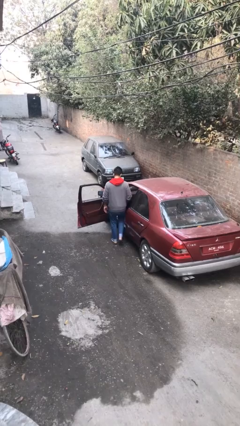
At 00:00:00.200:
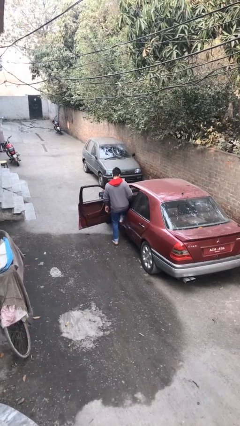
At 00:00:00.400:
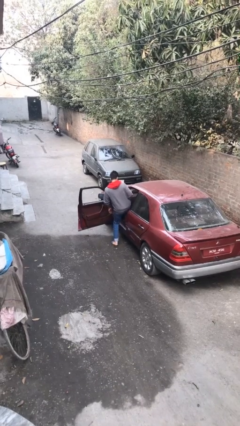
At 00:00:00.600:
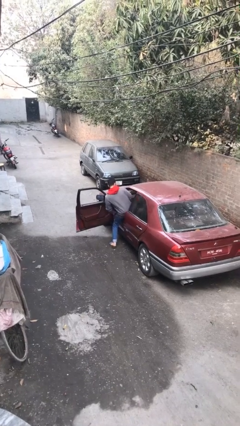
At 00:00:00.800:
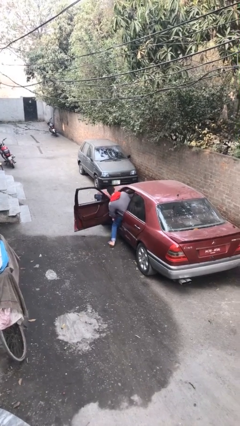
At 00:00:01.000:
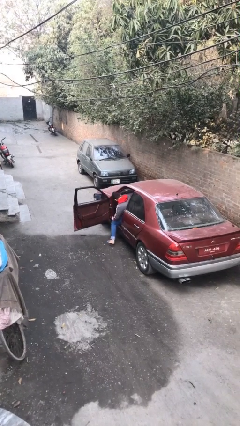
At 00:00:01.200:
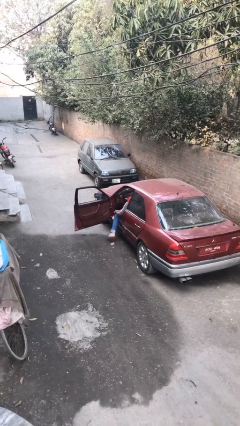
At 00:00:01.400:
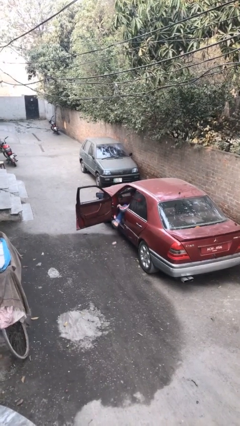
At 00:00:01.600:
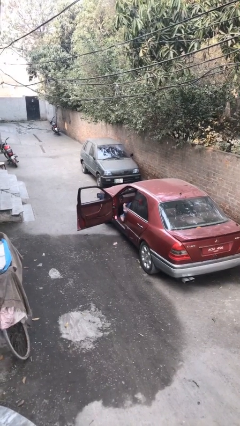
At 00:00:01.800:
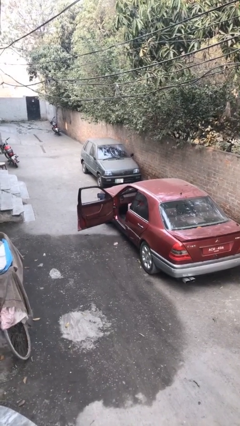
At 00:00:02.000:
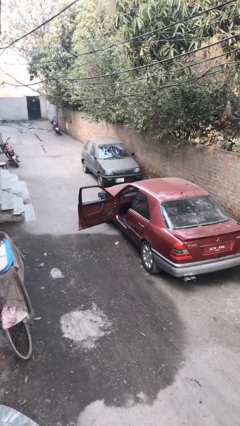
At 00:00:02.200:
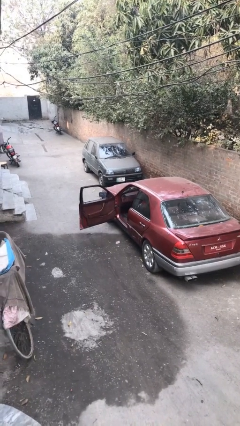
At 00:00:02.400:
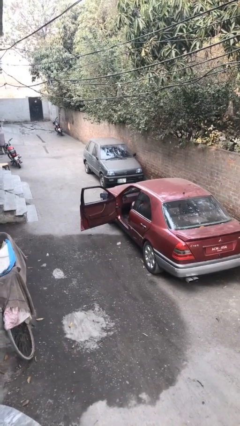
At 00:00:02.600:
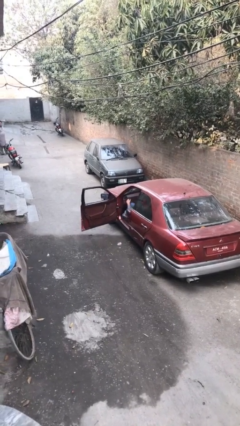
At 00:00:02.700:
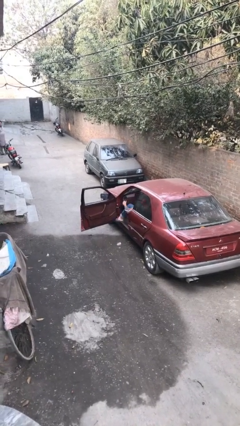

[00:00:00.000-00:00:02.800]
person enters car

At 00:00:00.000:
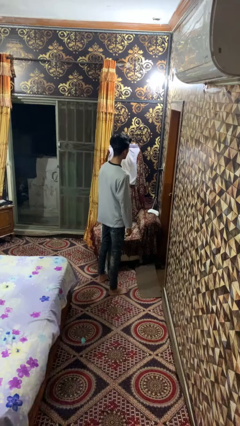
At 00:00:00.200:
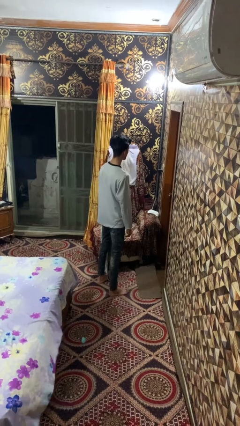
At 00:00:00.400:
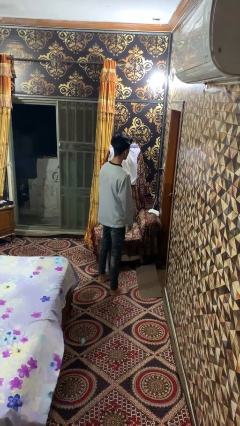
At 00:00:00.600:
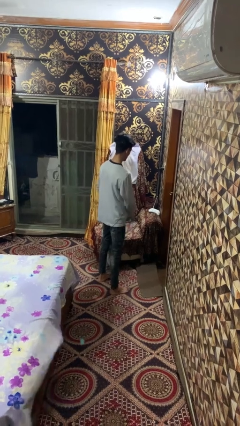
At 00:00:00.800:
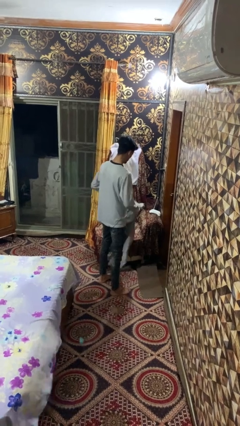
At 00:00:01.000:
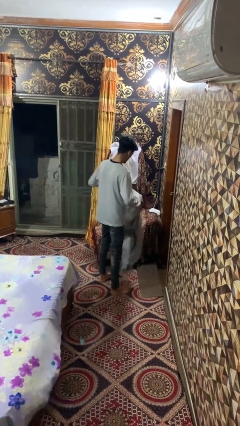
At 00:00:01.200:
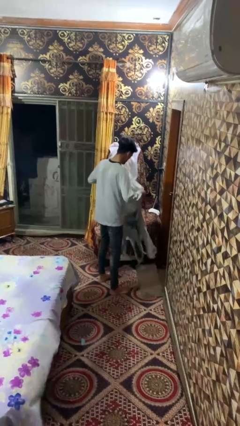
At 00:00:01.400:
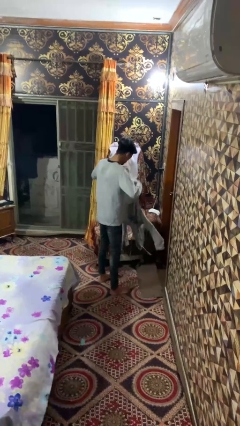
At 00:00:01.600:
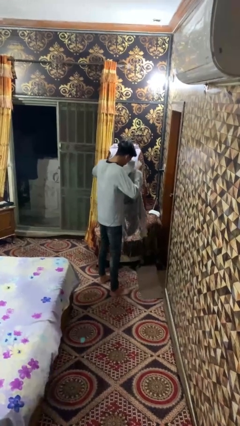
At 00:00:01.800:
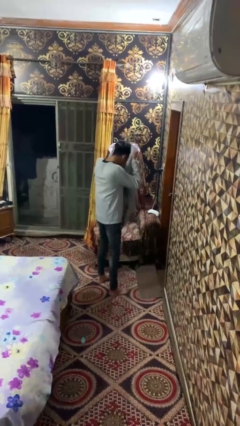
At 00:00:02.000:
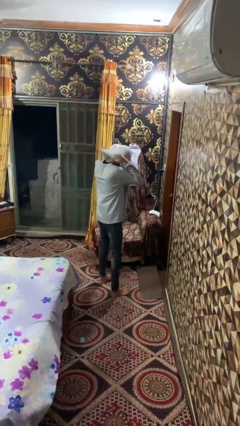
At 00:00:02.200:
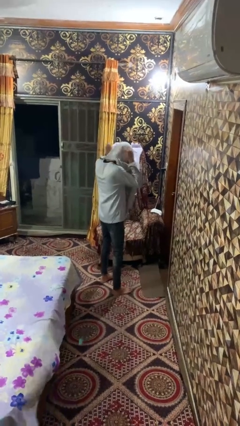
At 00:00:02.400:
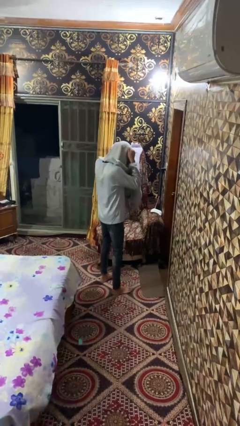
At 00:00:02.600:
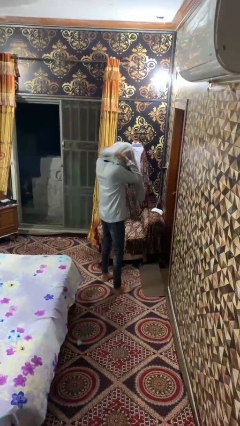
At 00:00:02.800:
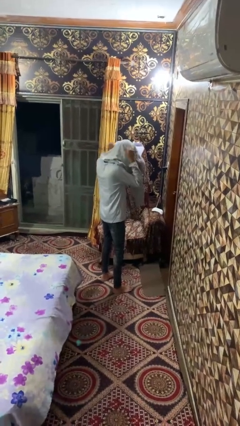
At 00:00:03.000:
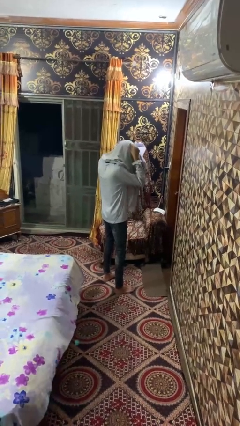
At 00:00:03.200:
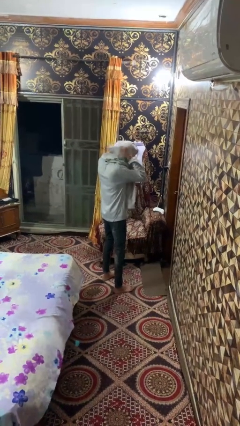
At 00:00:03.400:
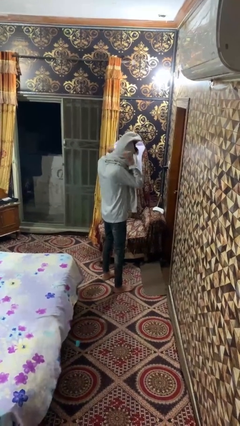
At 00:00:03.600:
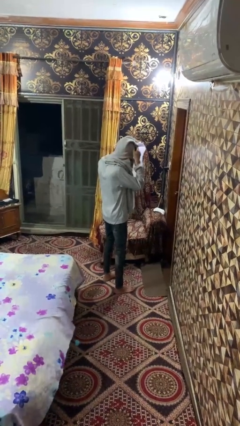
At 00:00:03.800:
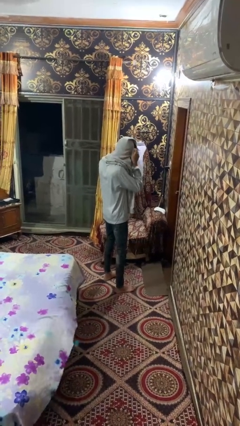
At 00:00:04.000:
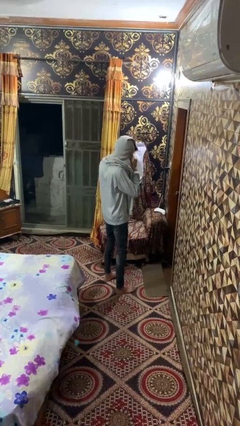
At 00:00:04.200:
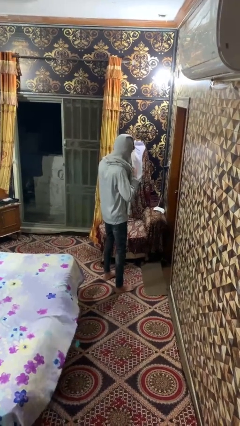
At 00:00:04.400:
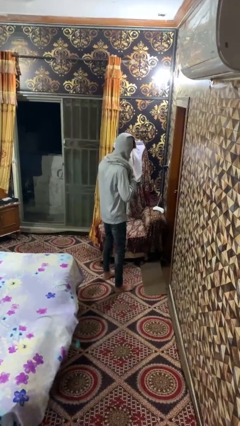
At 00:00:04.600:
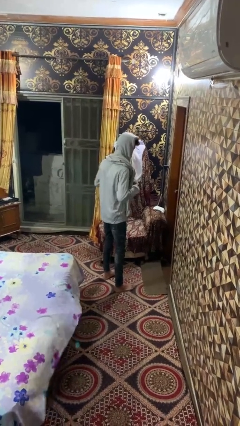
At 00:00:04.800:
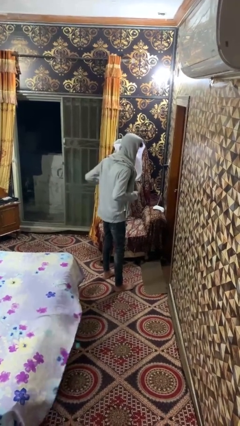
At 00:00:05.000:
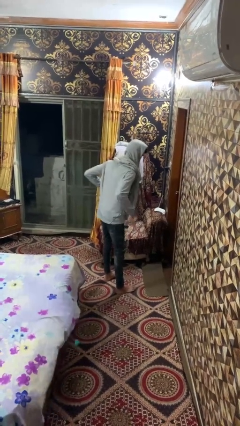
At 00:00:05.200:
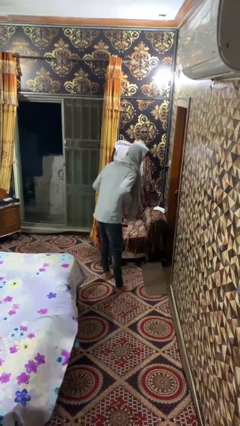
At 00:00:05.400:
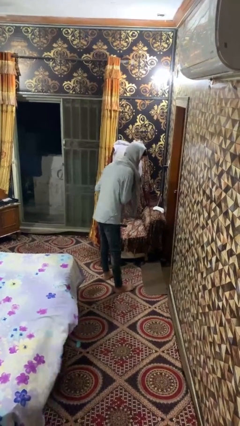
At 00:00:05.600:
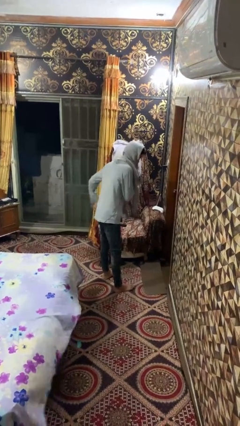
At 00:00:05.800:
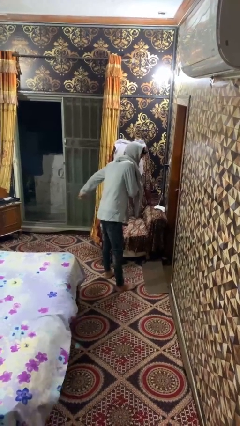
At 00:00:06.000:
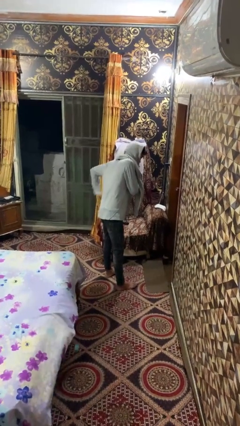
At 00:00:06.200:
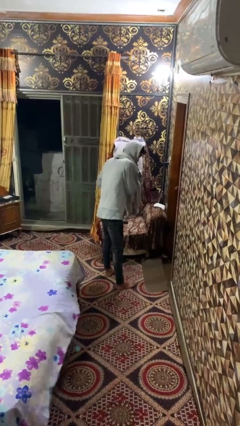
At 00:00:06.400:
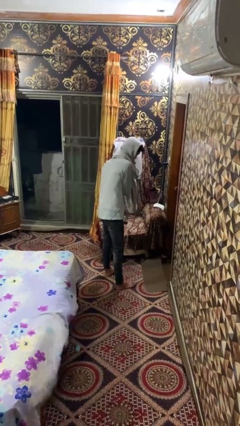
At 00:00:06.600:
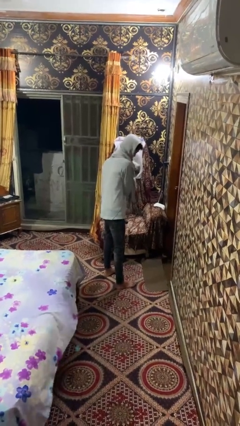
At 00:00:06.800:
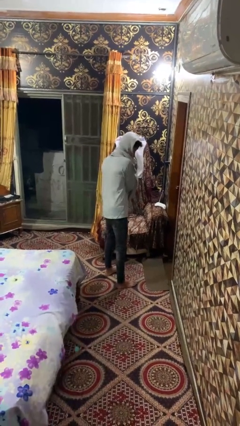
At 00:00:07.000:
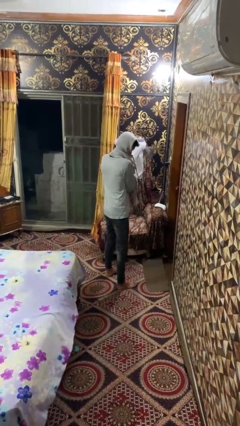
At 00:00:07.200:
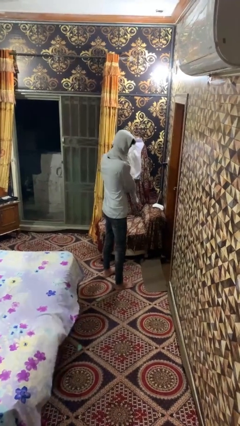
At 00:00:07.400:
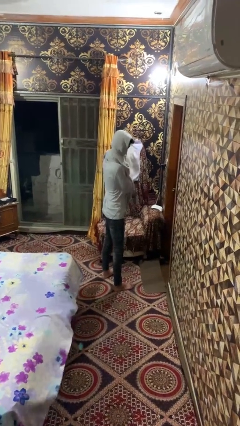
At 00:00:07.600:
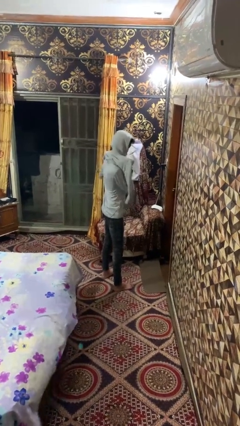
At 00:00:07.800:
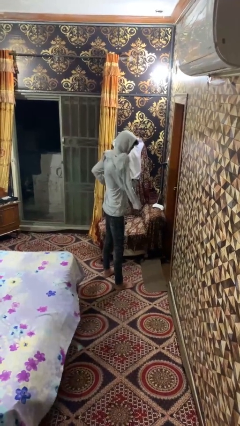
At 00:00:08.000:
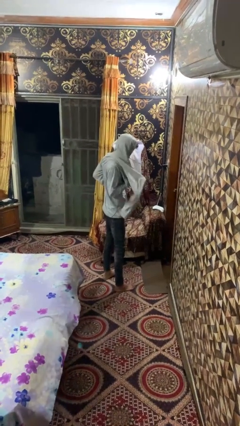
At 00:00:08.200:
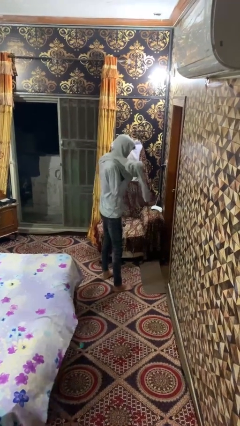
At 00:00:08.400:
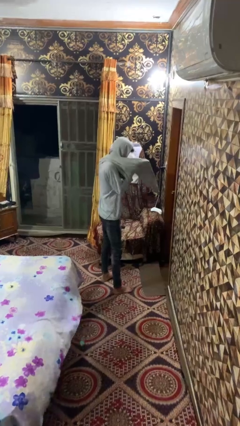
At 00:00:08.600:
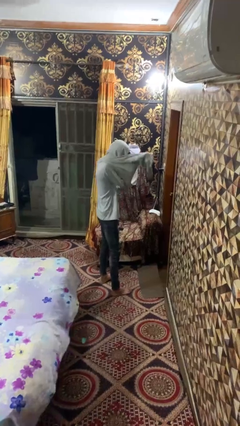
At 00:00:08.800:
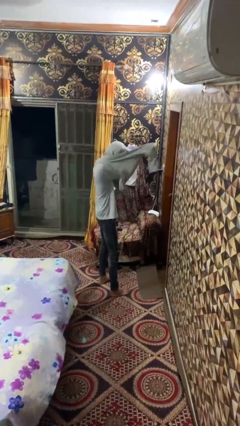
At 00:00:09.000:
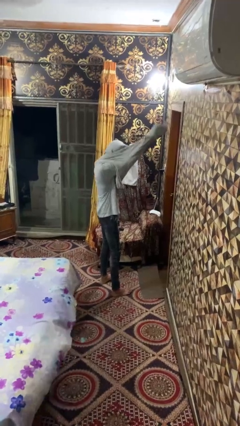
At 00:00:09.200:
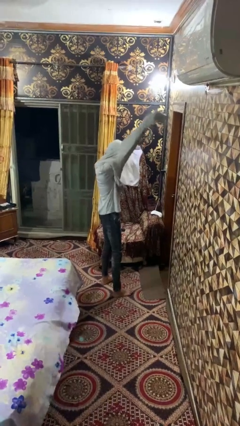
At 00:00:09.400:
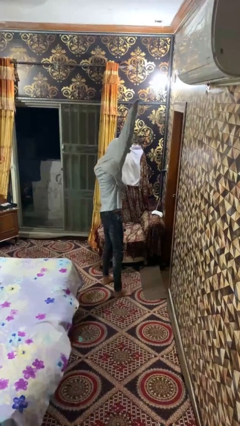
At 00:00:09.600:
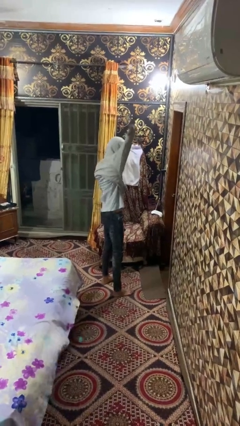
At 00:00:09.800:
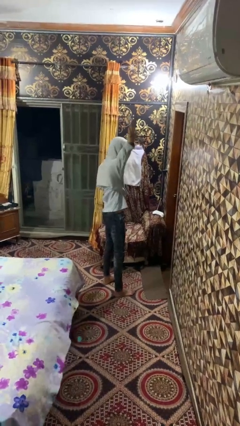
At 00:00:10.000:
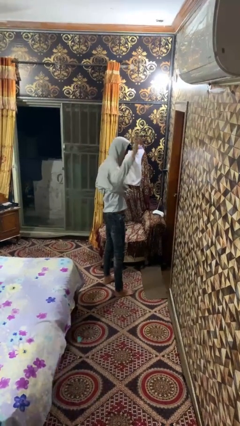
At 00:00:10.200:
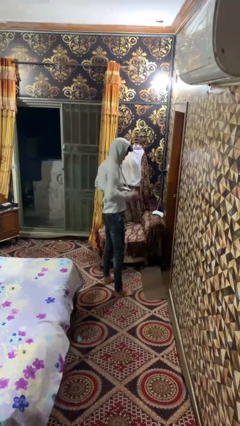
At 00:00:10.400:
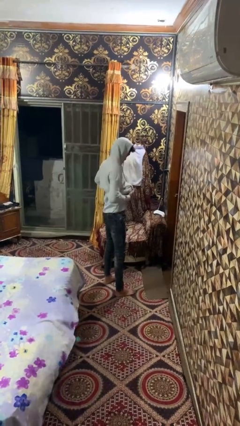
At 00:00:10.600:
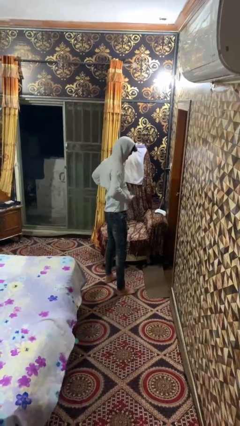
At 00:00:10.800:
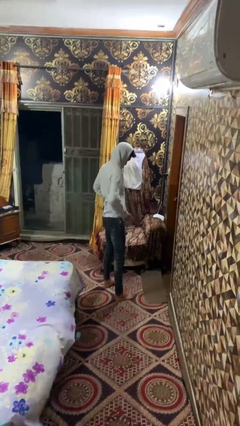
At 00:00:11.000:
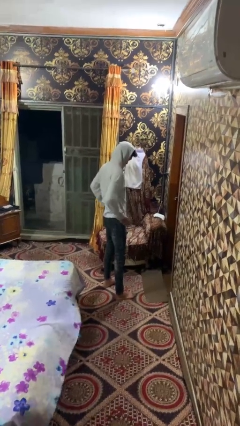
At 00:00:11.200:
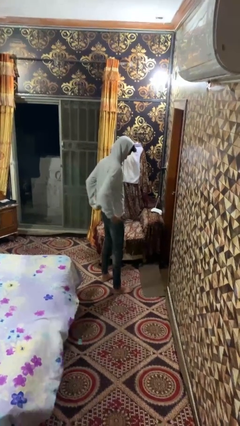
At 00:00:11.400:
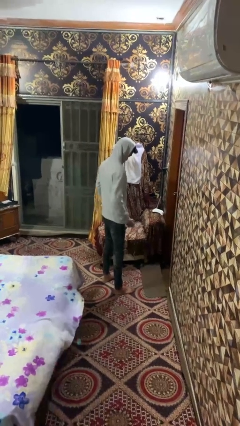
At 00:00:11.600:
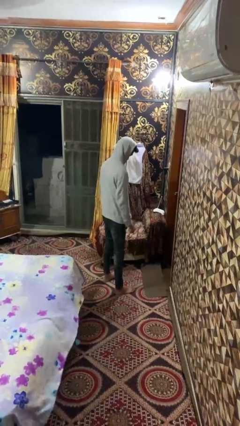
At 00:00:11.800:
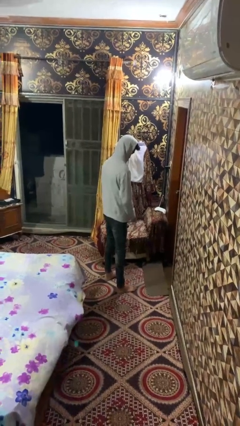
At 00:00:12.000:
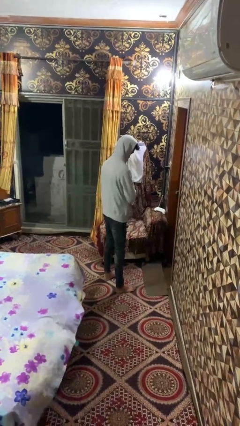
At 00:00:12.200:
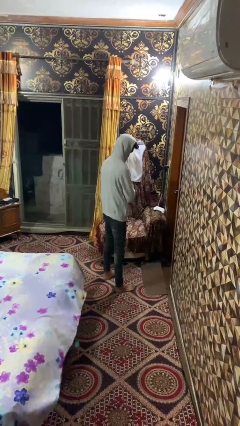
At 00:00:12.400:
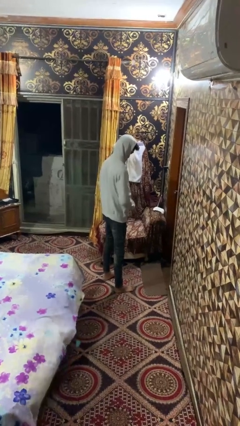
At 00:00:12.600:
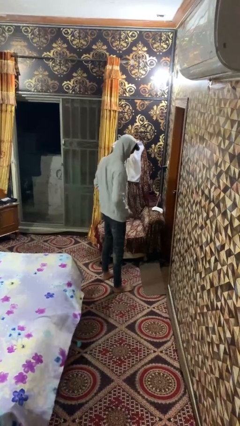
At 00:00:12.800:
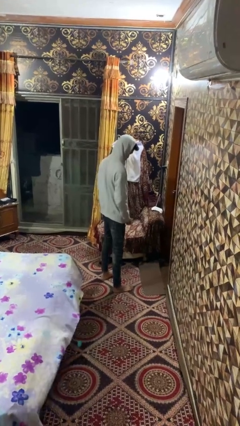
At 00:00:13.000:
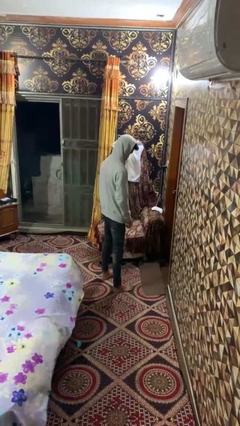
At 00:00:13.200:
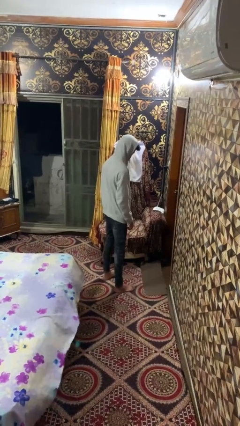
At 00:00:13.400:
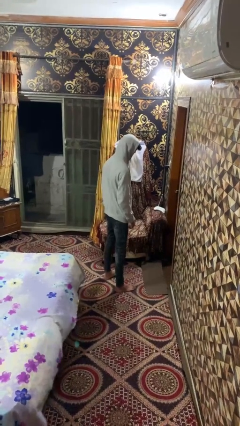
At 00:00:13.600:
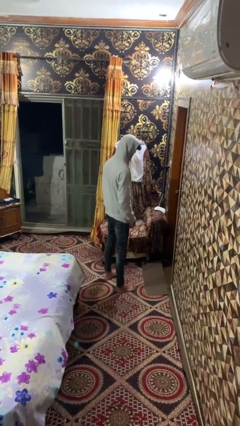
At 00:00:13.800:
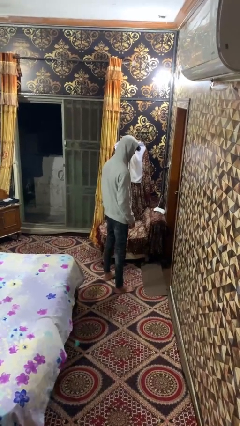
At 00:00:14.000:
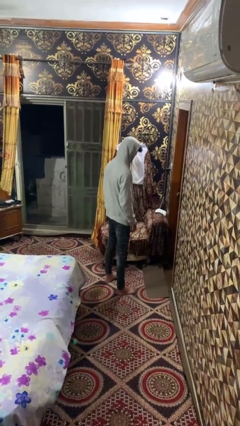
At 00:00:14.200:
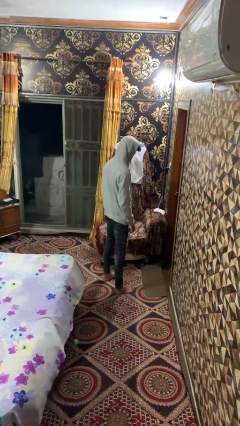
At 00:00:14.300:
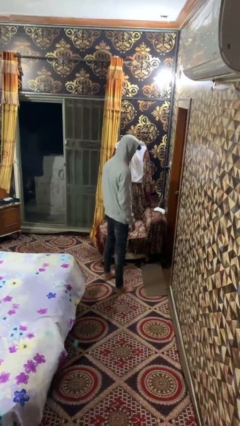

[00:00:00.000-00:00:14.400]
person puts on hoodie

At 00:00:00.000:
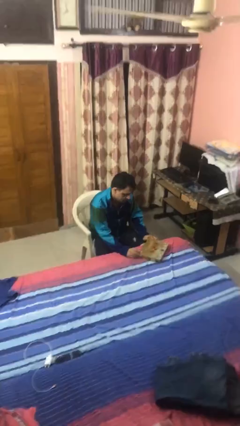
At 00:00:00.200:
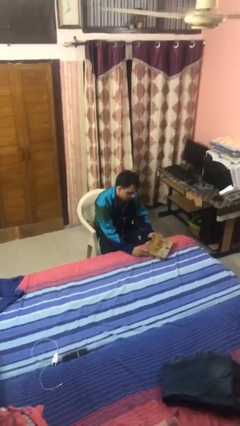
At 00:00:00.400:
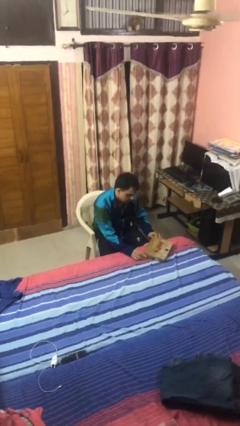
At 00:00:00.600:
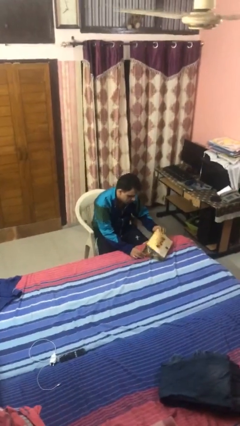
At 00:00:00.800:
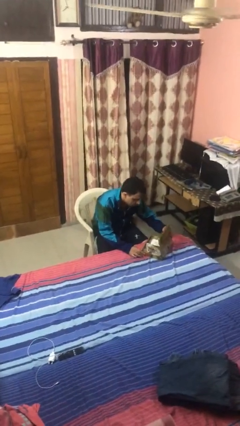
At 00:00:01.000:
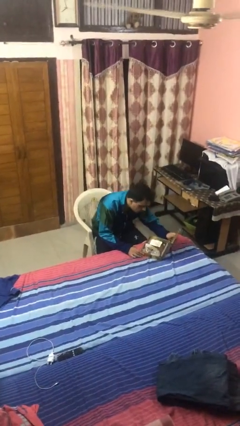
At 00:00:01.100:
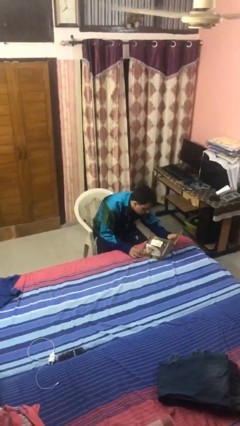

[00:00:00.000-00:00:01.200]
person opens jewelry box
